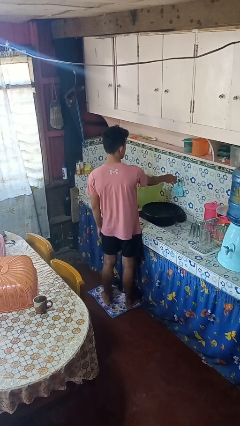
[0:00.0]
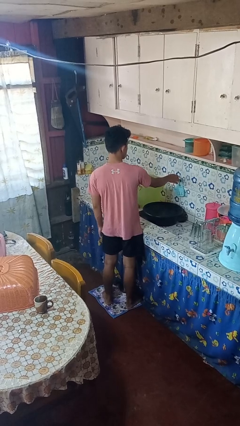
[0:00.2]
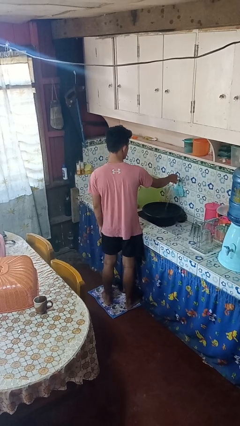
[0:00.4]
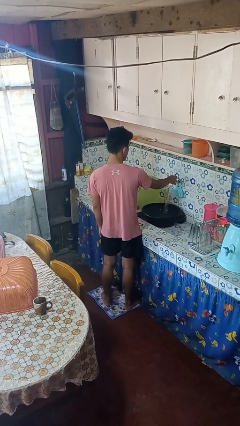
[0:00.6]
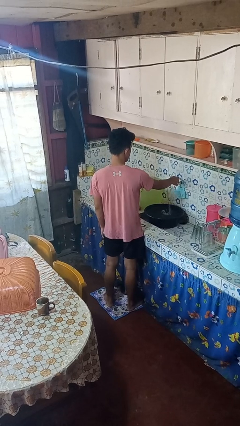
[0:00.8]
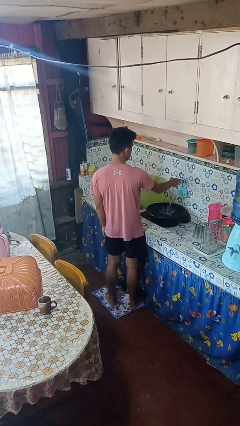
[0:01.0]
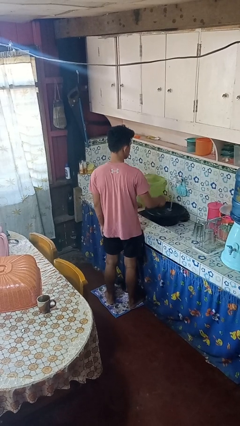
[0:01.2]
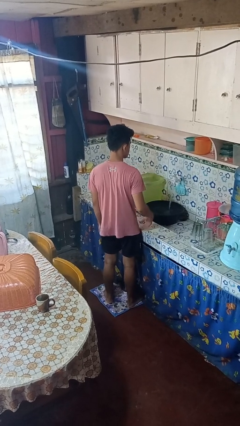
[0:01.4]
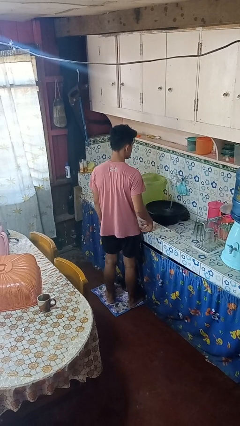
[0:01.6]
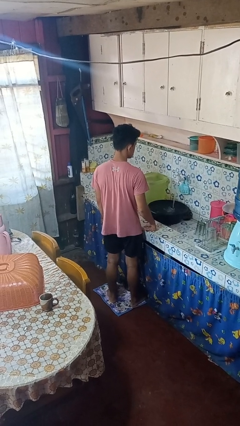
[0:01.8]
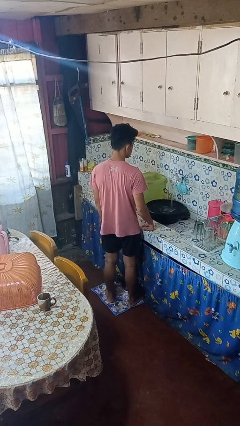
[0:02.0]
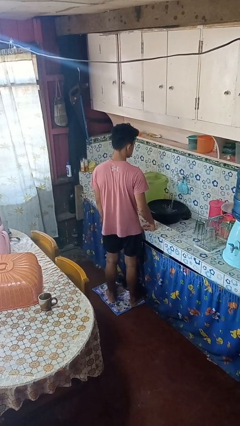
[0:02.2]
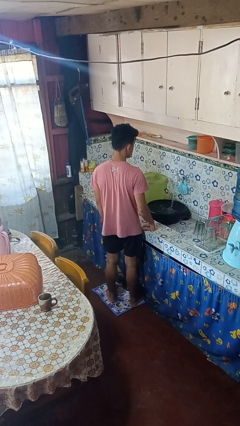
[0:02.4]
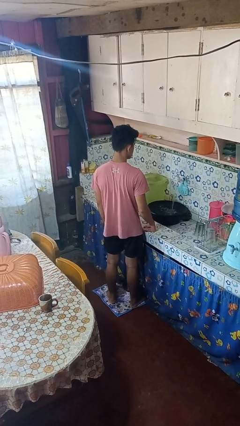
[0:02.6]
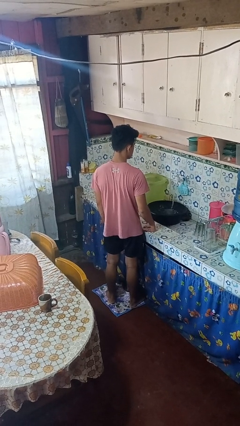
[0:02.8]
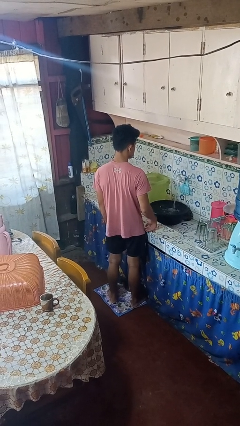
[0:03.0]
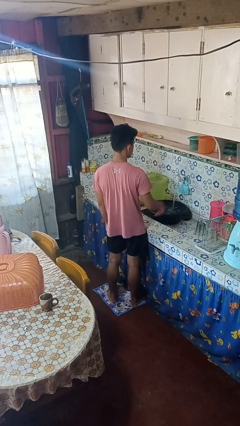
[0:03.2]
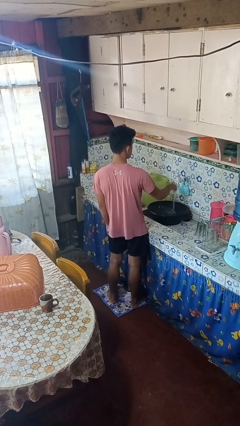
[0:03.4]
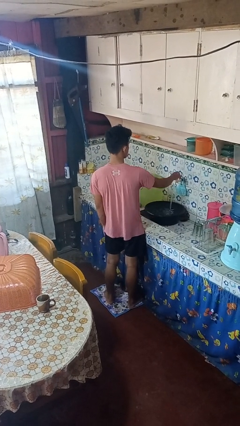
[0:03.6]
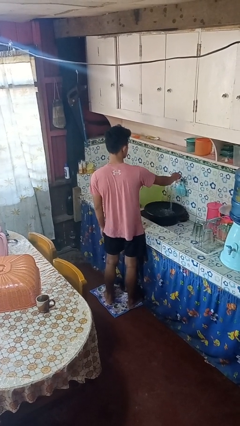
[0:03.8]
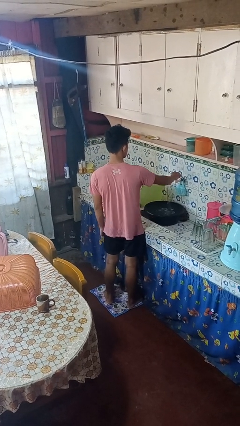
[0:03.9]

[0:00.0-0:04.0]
person turns on faucet

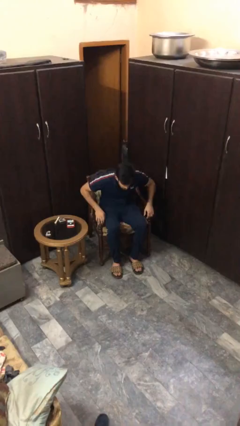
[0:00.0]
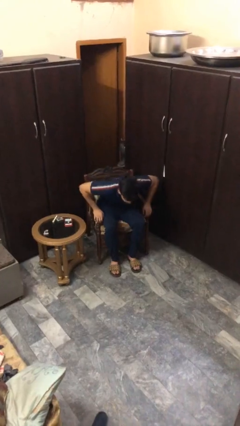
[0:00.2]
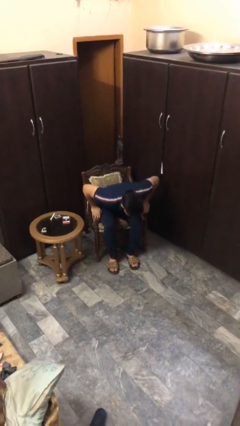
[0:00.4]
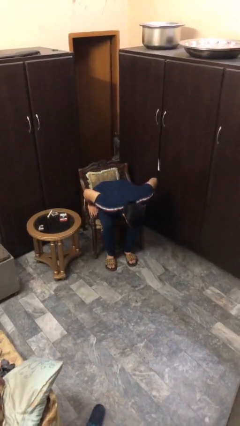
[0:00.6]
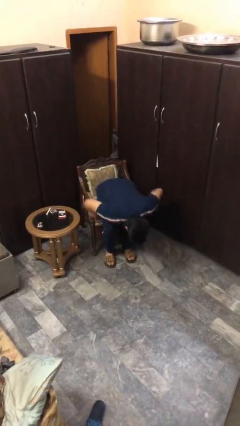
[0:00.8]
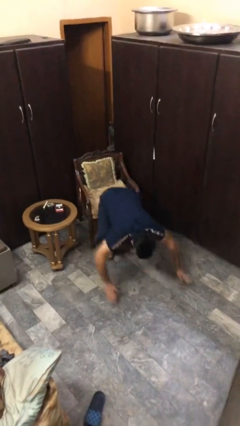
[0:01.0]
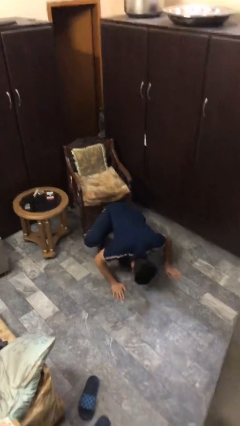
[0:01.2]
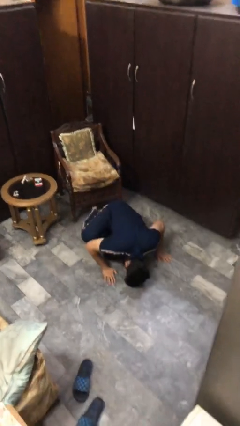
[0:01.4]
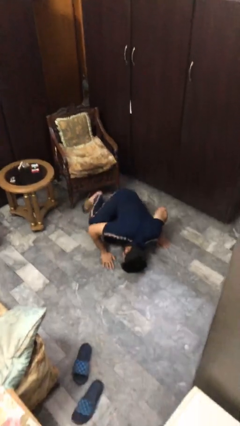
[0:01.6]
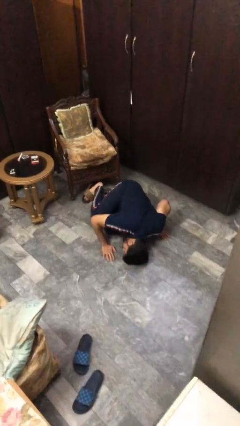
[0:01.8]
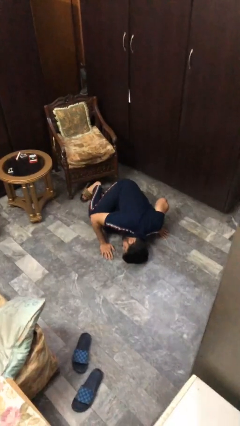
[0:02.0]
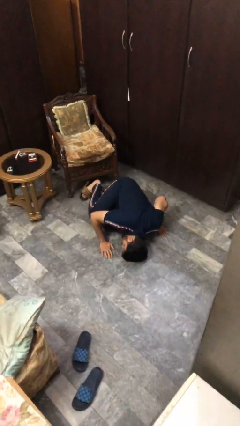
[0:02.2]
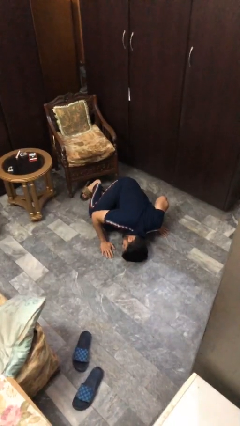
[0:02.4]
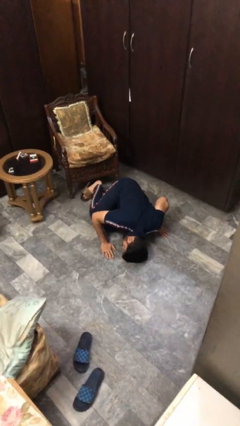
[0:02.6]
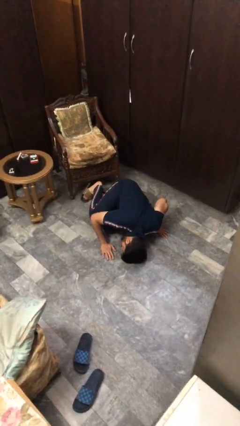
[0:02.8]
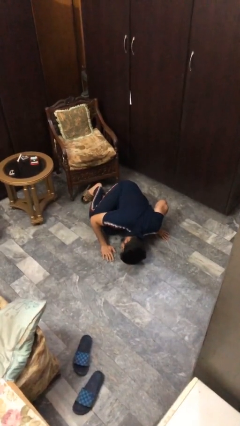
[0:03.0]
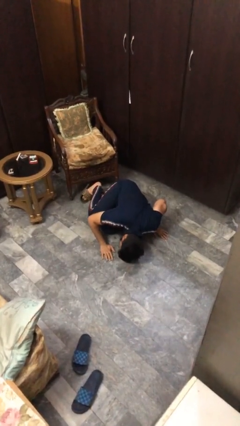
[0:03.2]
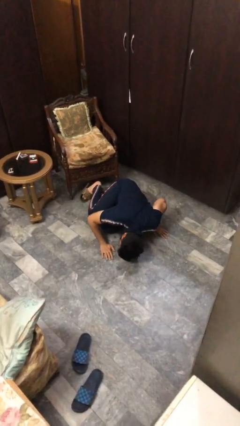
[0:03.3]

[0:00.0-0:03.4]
person falls from chair

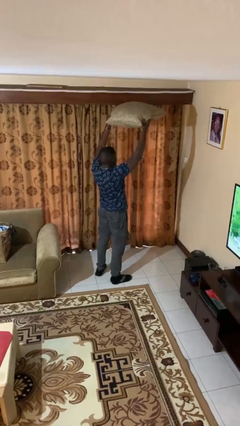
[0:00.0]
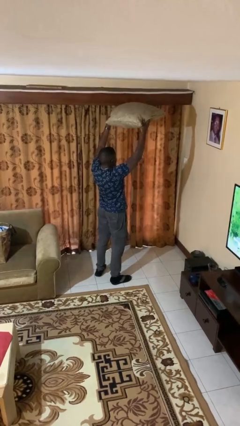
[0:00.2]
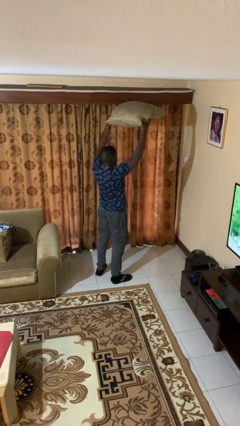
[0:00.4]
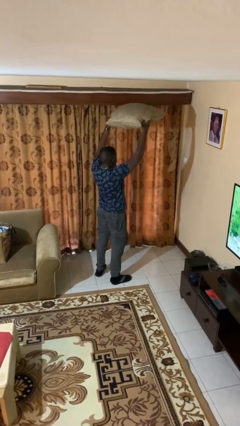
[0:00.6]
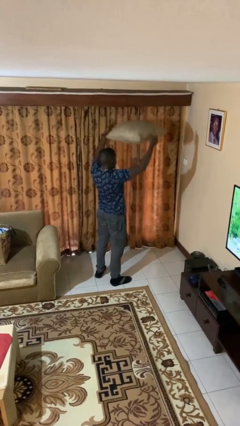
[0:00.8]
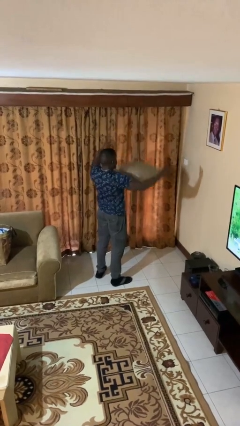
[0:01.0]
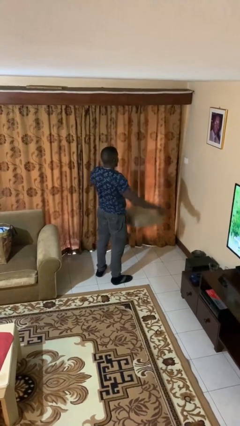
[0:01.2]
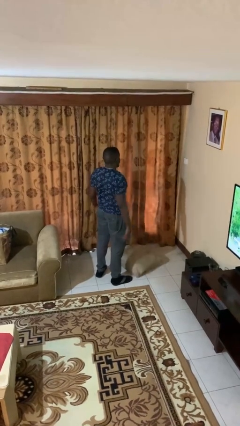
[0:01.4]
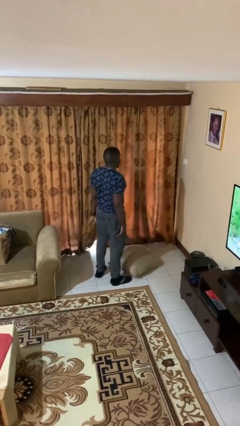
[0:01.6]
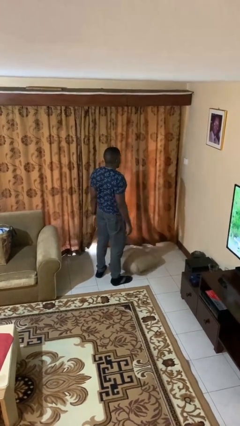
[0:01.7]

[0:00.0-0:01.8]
person drops object

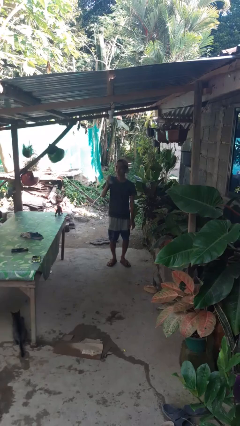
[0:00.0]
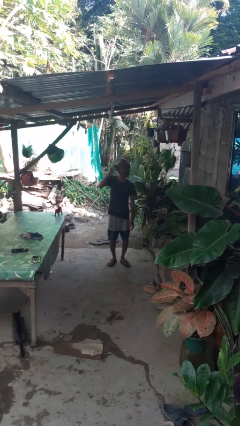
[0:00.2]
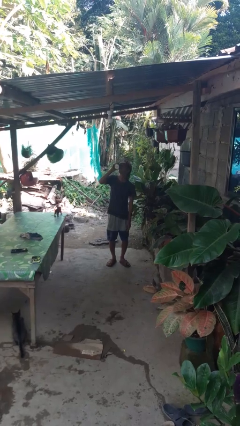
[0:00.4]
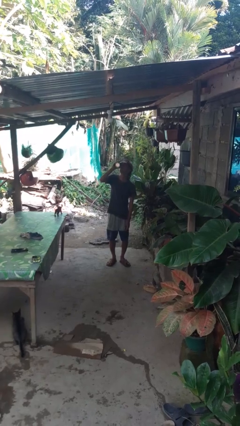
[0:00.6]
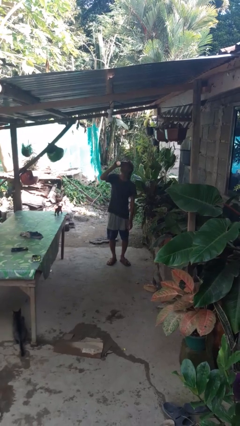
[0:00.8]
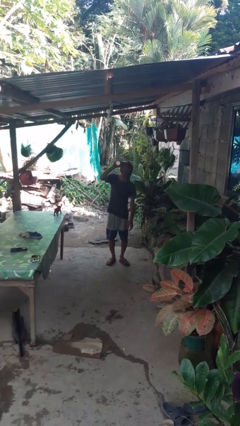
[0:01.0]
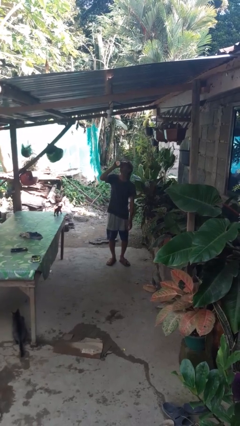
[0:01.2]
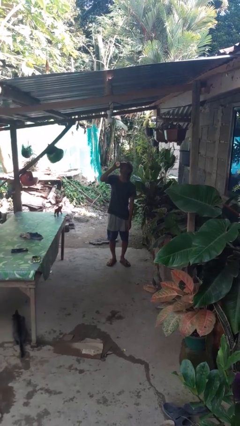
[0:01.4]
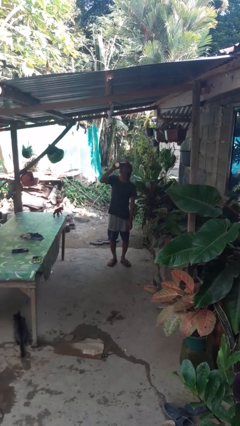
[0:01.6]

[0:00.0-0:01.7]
person drinks from beverage can

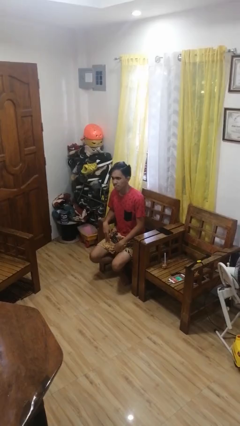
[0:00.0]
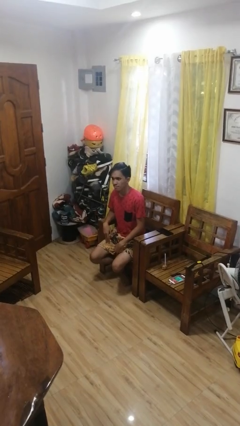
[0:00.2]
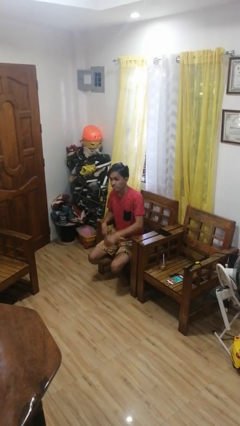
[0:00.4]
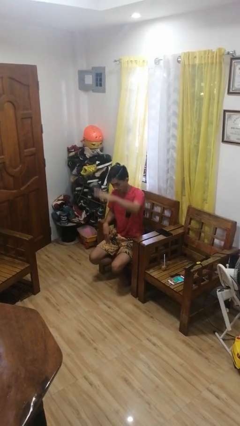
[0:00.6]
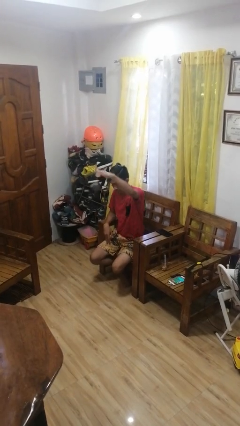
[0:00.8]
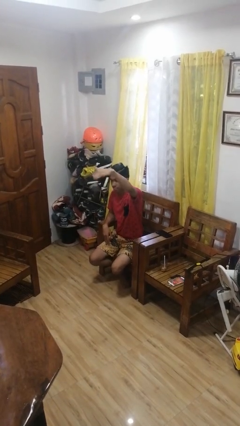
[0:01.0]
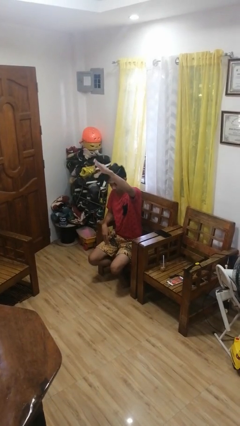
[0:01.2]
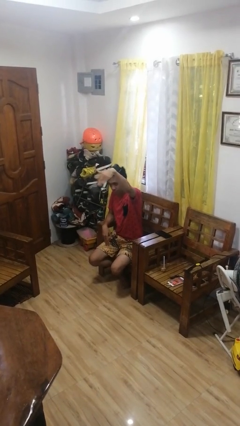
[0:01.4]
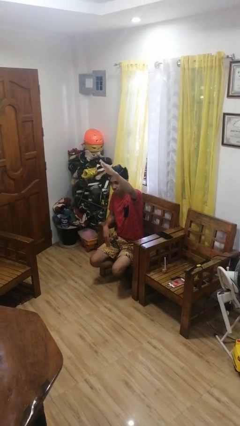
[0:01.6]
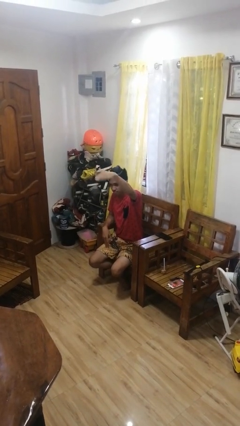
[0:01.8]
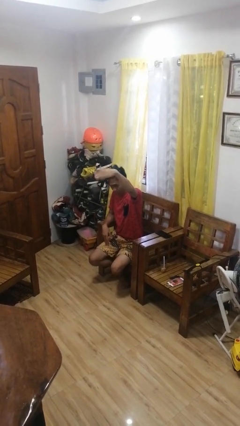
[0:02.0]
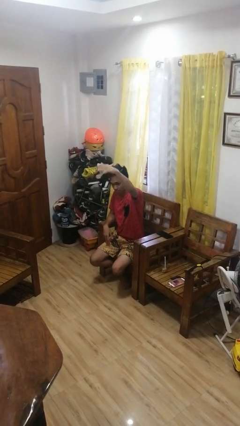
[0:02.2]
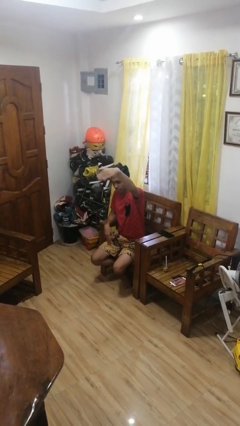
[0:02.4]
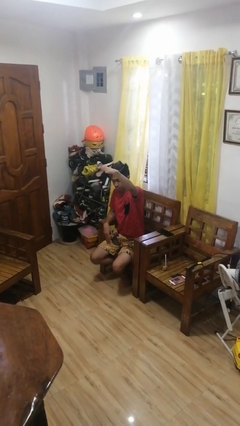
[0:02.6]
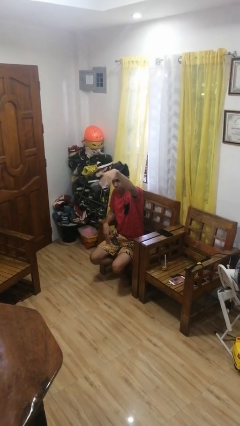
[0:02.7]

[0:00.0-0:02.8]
person gestures come here

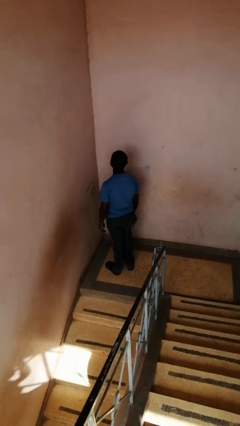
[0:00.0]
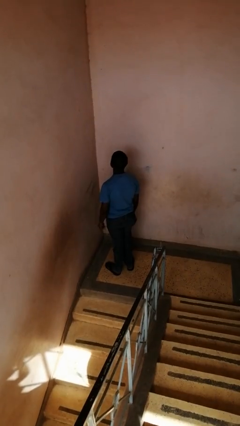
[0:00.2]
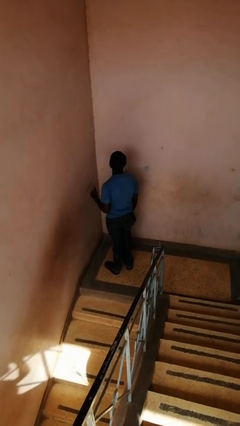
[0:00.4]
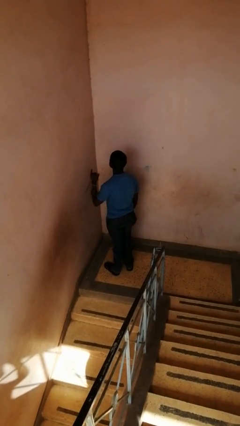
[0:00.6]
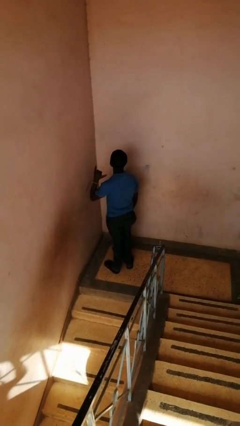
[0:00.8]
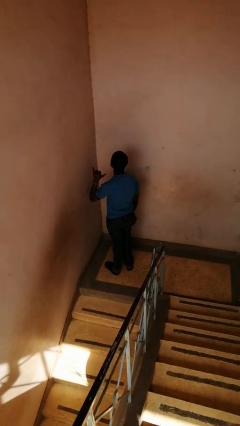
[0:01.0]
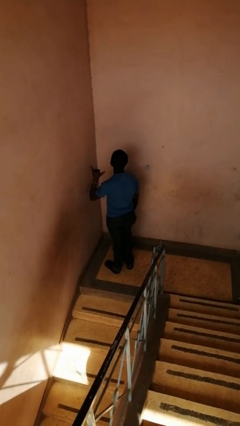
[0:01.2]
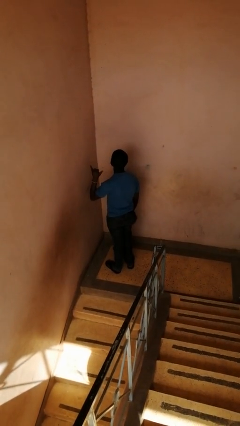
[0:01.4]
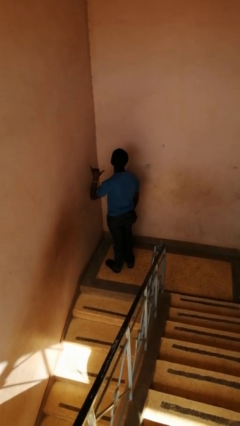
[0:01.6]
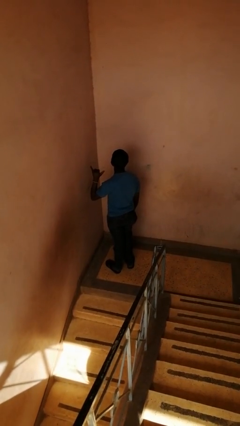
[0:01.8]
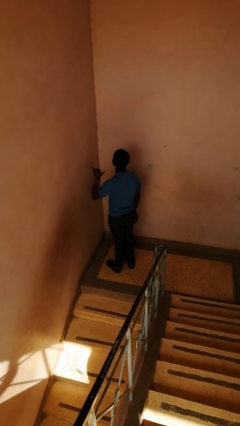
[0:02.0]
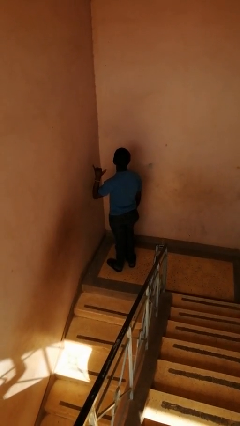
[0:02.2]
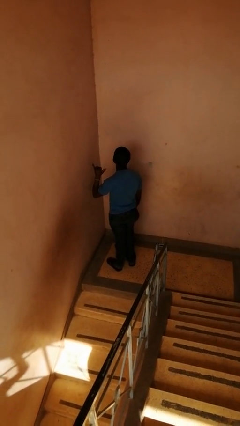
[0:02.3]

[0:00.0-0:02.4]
person gestures hang loose

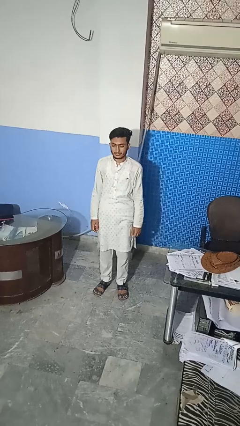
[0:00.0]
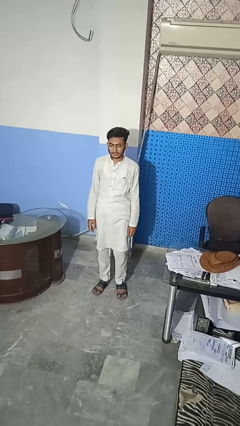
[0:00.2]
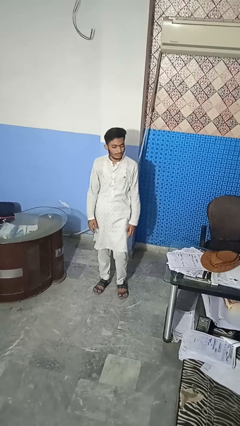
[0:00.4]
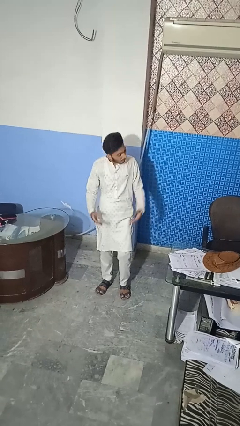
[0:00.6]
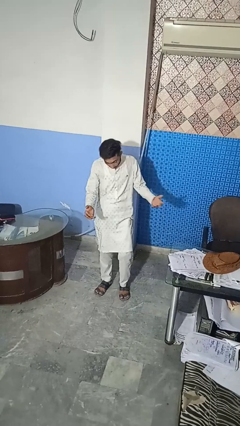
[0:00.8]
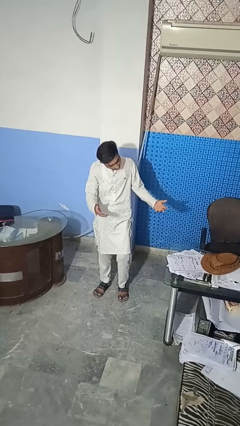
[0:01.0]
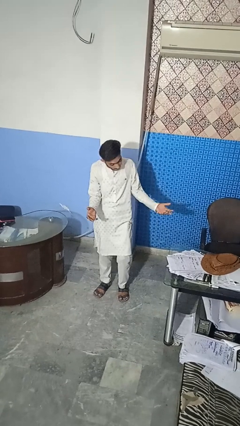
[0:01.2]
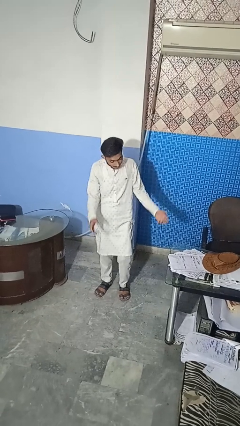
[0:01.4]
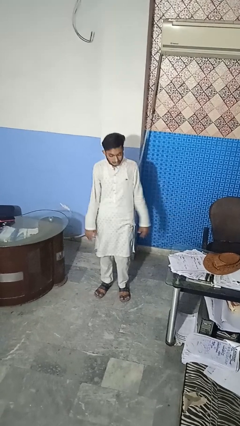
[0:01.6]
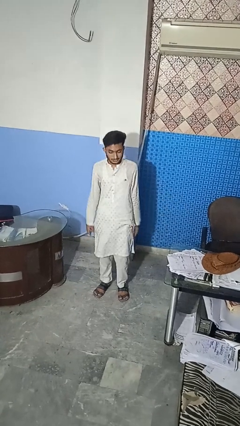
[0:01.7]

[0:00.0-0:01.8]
person shrugs
